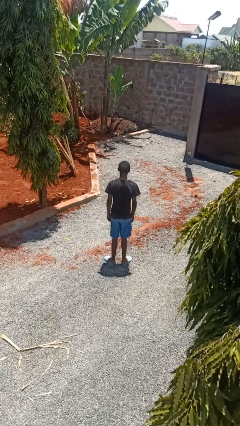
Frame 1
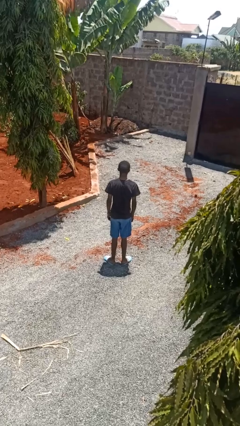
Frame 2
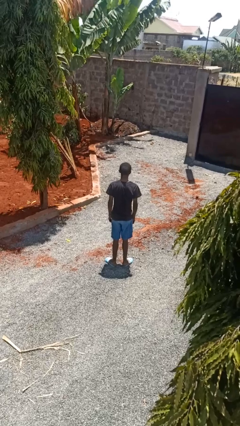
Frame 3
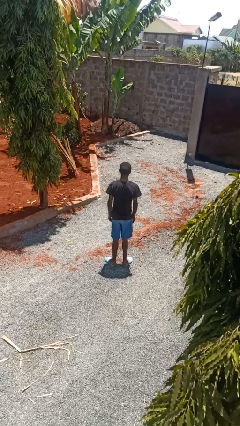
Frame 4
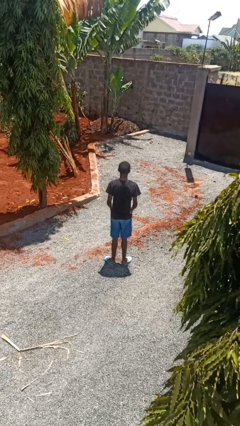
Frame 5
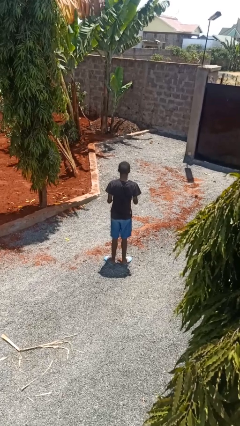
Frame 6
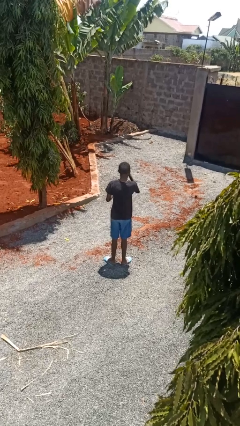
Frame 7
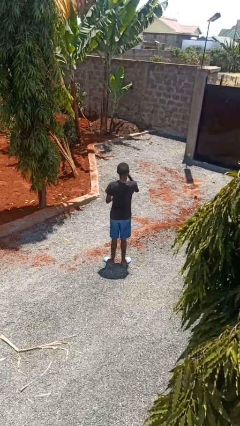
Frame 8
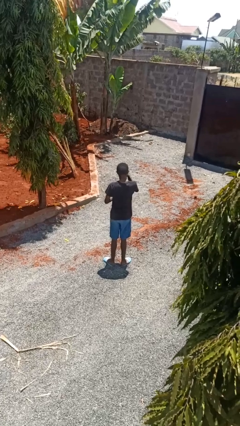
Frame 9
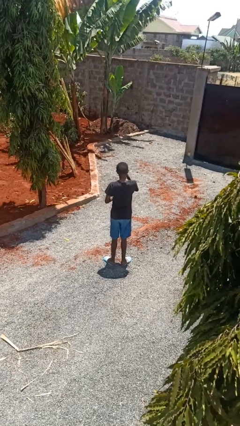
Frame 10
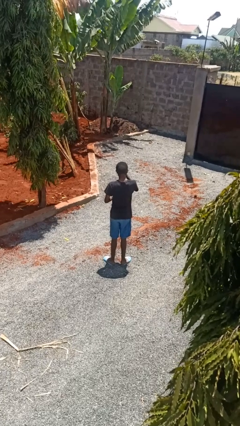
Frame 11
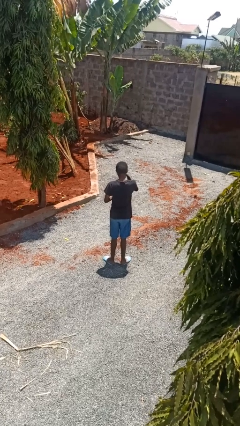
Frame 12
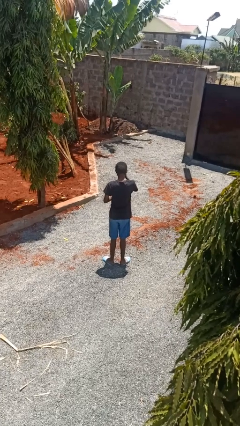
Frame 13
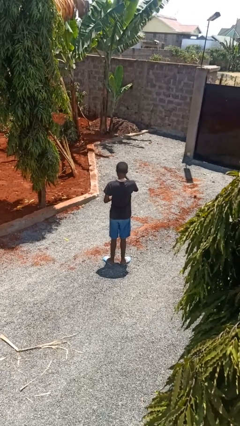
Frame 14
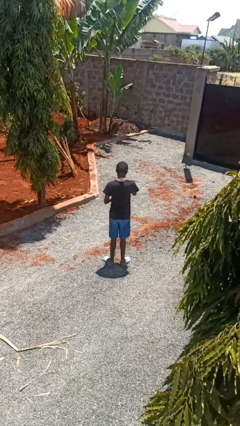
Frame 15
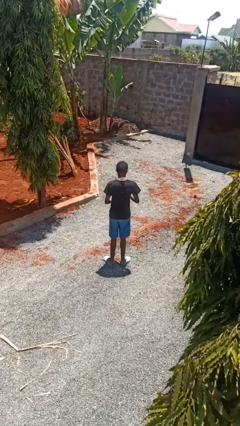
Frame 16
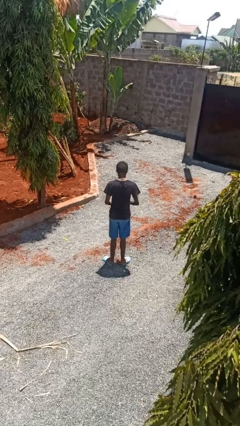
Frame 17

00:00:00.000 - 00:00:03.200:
person rubs eyes

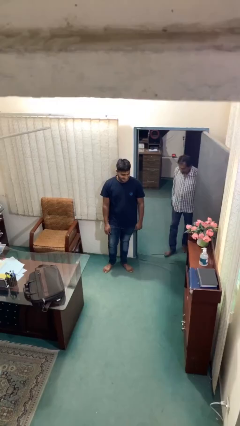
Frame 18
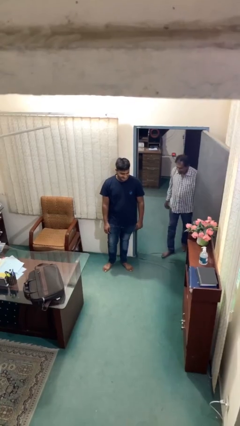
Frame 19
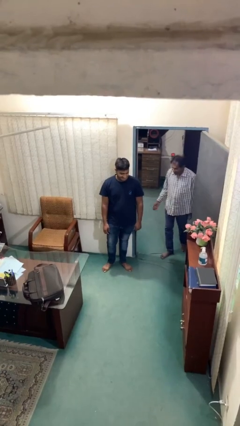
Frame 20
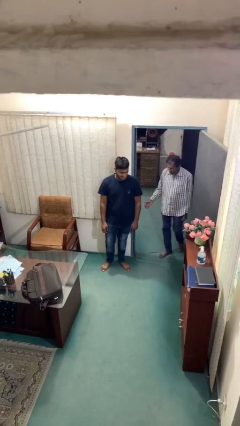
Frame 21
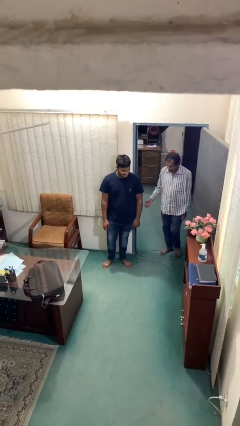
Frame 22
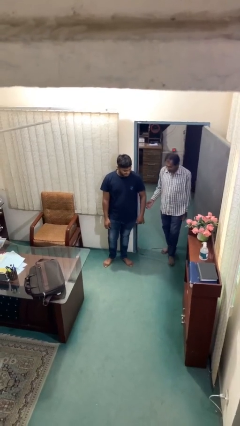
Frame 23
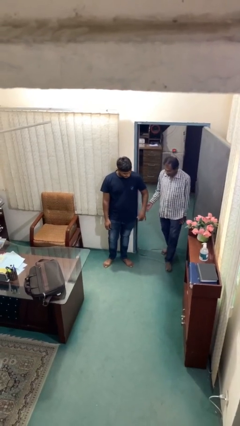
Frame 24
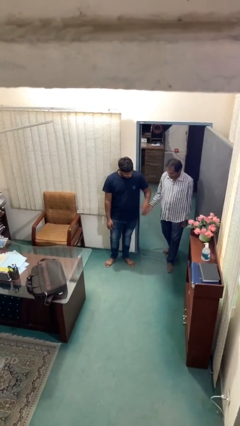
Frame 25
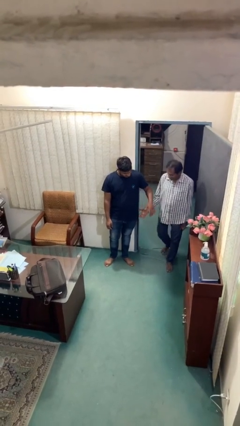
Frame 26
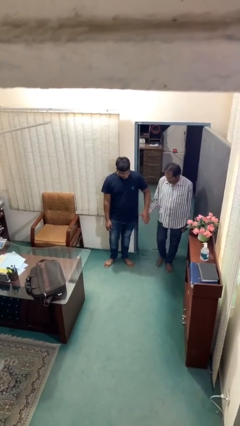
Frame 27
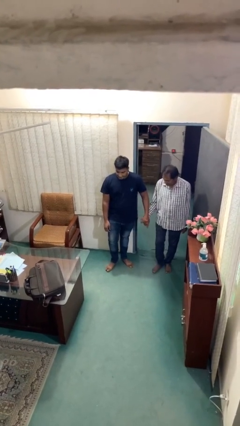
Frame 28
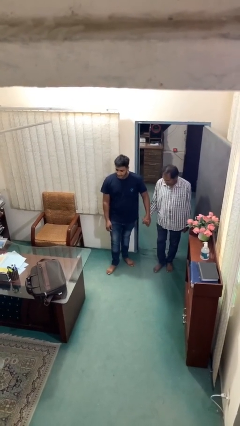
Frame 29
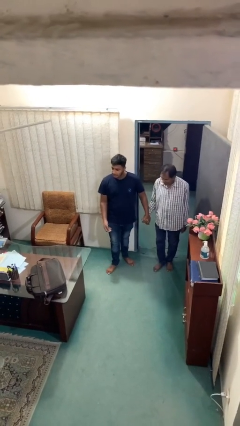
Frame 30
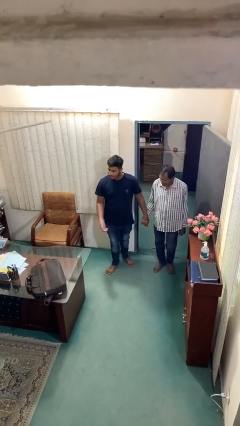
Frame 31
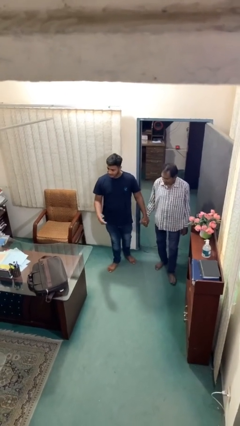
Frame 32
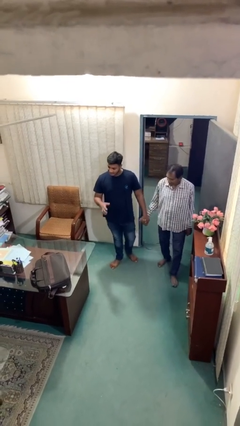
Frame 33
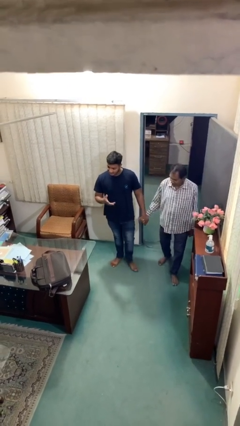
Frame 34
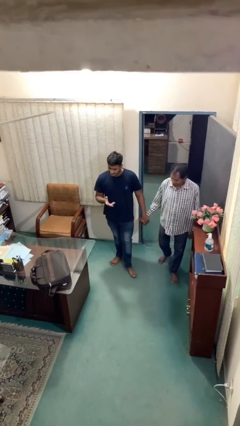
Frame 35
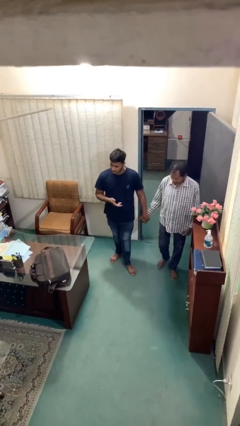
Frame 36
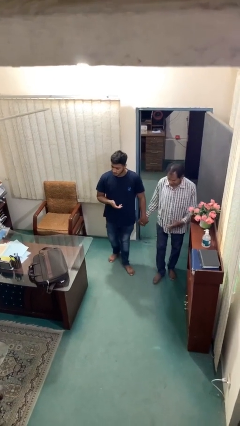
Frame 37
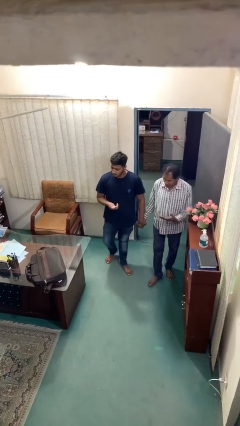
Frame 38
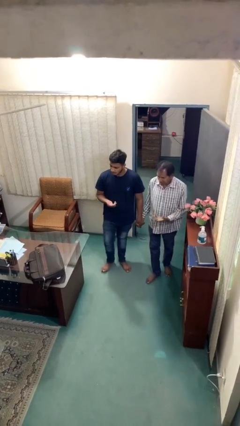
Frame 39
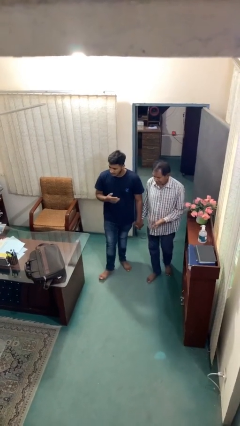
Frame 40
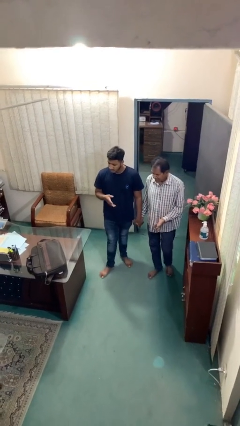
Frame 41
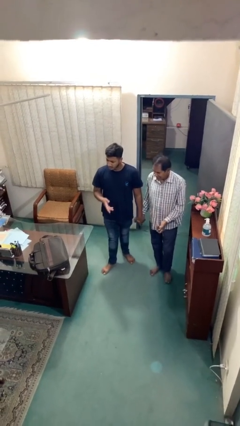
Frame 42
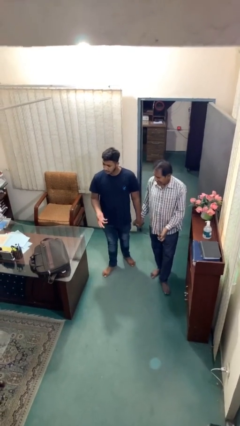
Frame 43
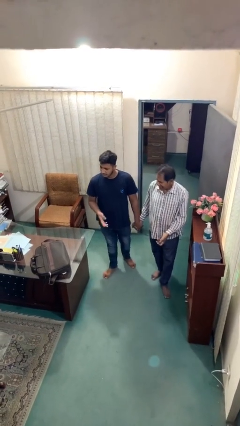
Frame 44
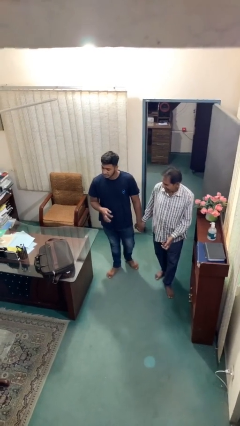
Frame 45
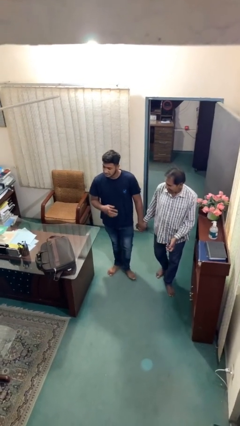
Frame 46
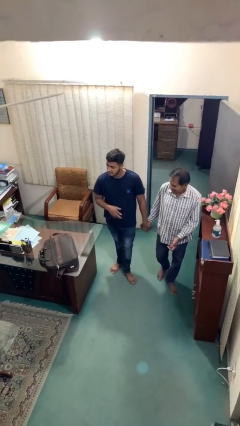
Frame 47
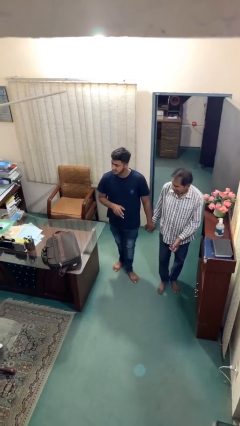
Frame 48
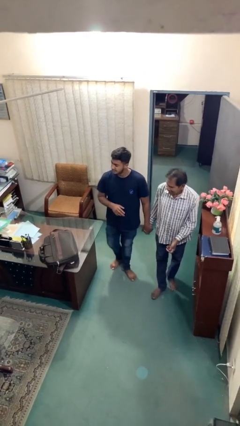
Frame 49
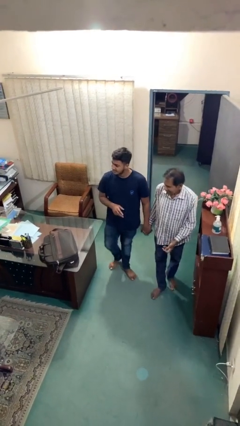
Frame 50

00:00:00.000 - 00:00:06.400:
person holds hand

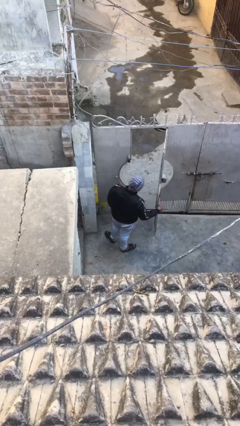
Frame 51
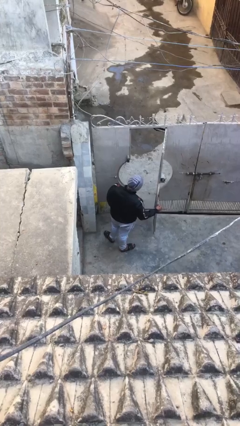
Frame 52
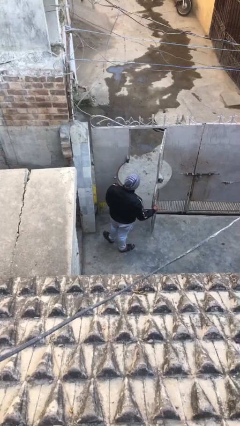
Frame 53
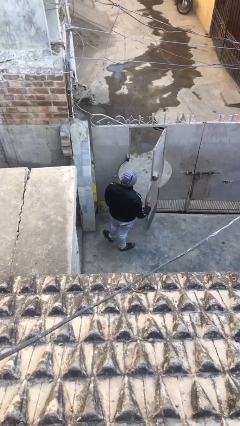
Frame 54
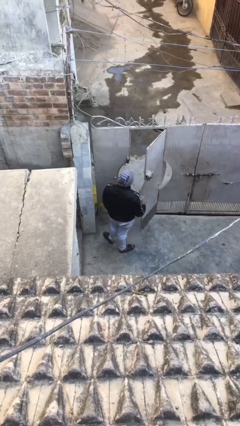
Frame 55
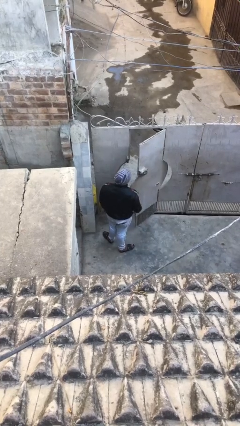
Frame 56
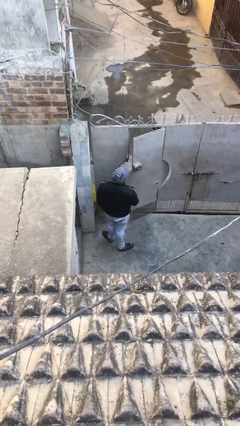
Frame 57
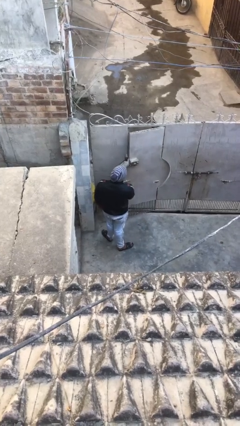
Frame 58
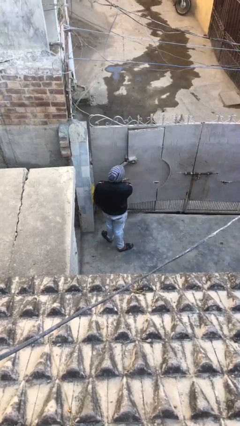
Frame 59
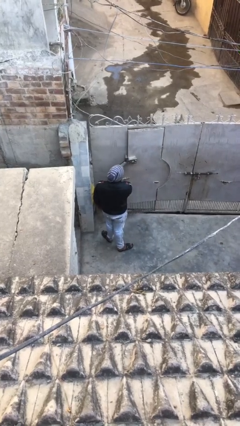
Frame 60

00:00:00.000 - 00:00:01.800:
person closes facility door

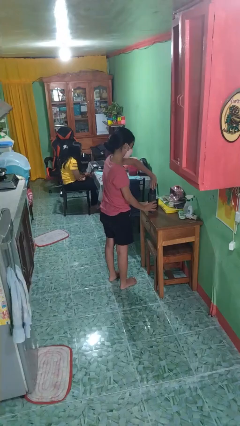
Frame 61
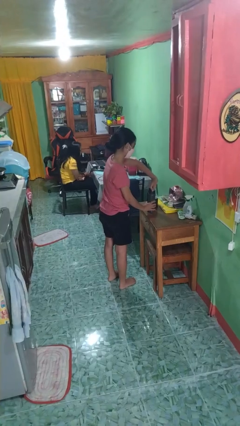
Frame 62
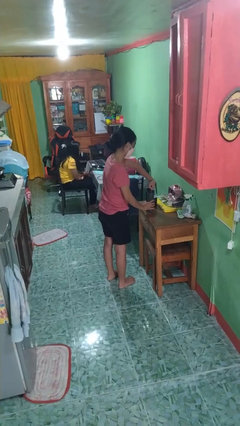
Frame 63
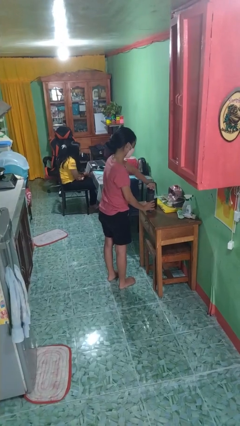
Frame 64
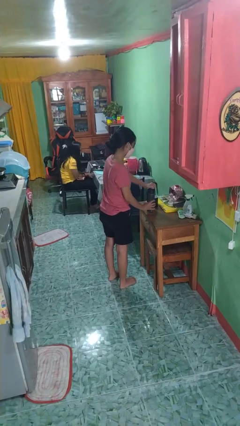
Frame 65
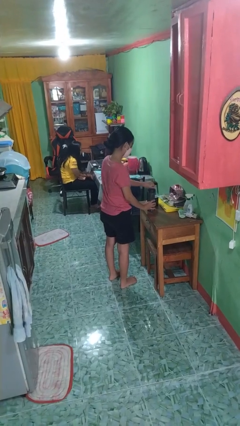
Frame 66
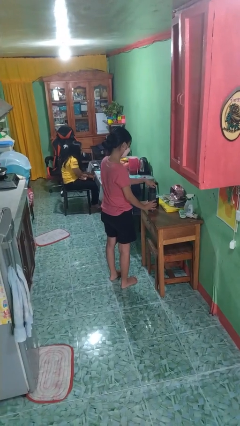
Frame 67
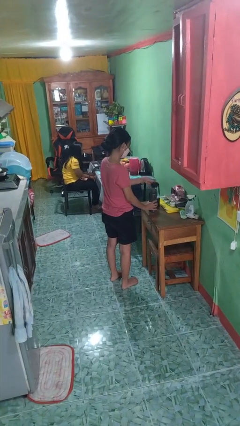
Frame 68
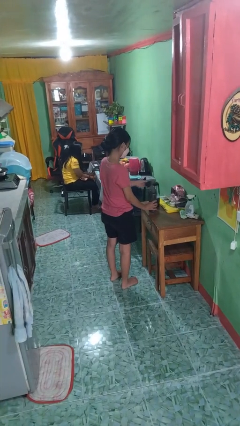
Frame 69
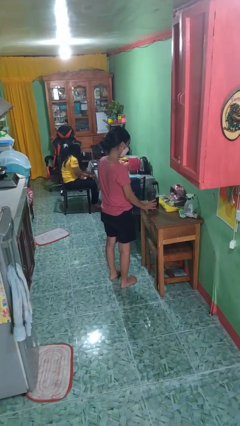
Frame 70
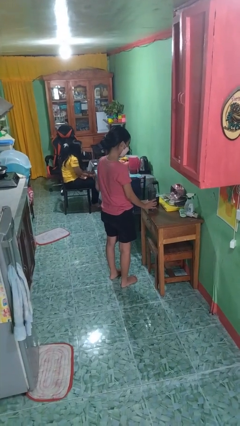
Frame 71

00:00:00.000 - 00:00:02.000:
person unscrews lid from bottle

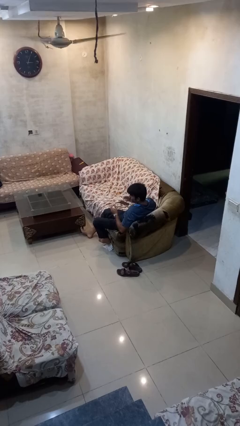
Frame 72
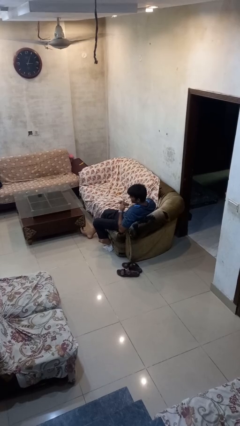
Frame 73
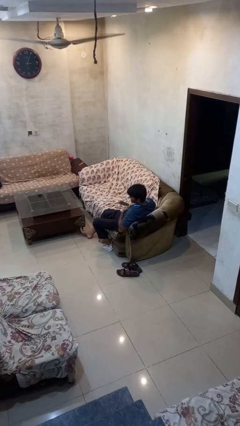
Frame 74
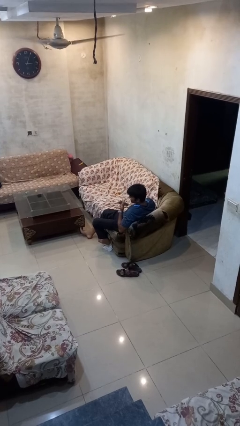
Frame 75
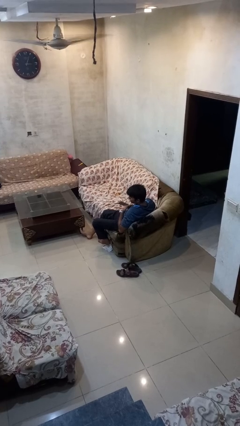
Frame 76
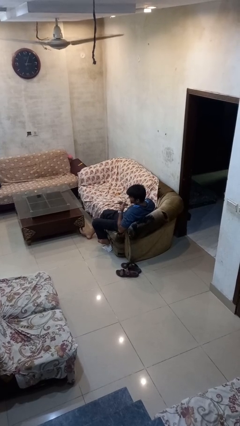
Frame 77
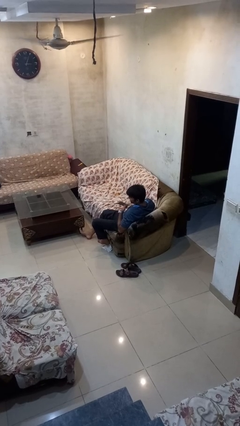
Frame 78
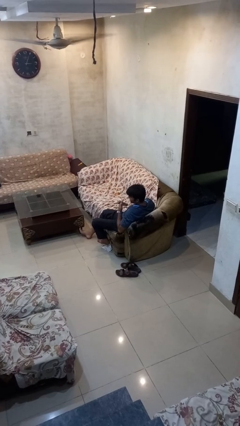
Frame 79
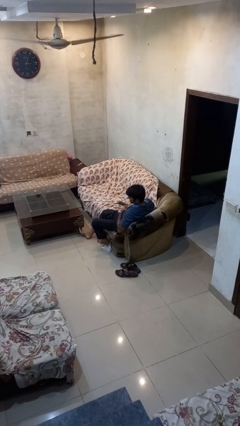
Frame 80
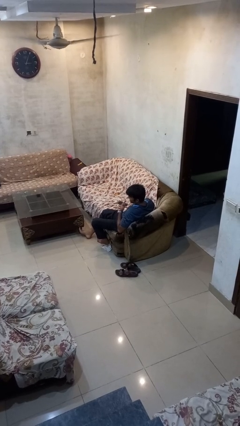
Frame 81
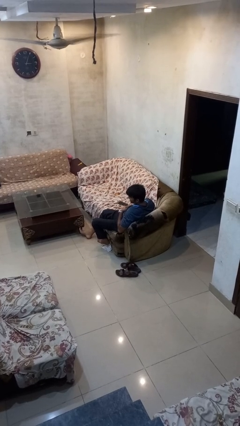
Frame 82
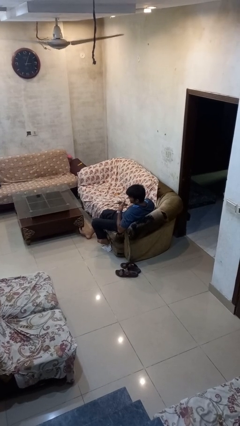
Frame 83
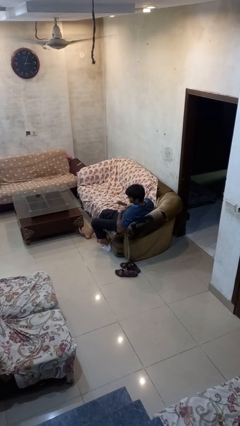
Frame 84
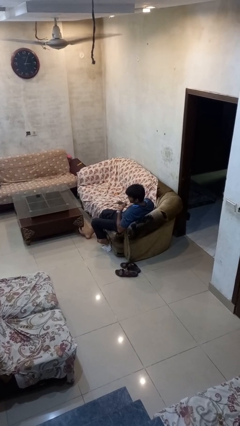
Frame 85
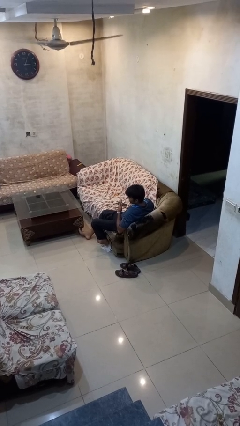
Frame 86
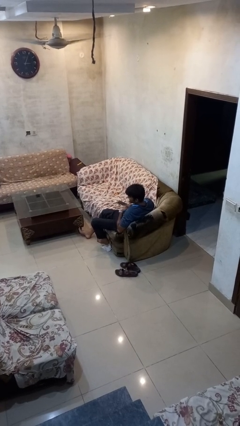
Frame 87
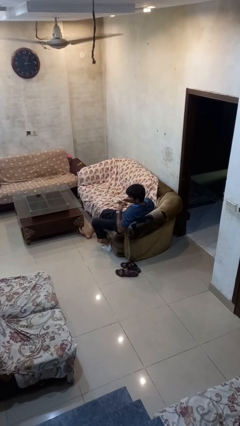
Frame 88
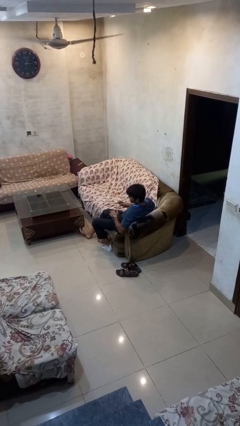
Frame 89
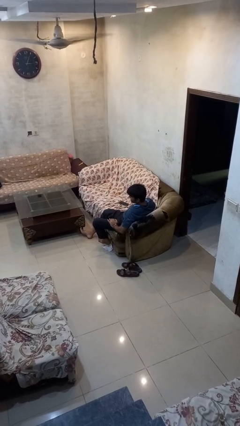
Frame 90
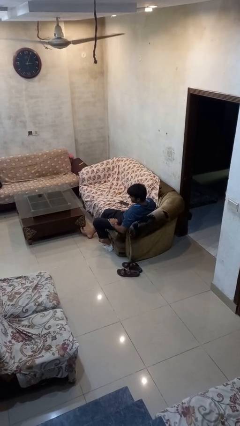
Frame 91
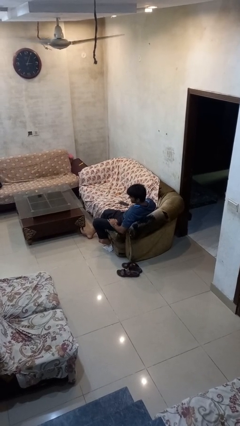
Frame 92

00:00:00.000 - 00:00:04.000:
person drums on chest
